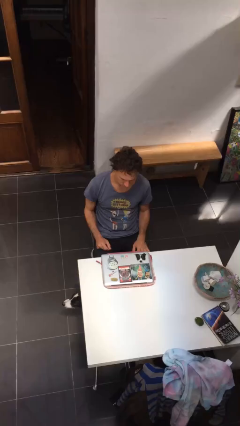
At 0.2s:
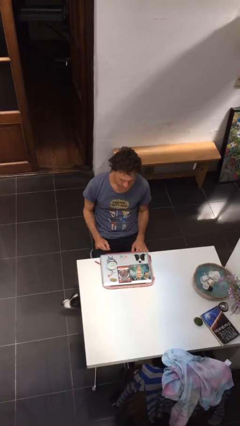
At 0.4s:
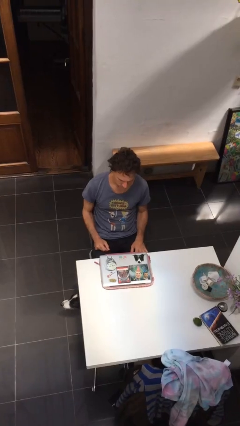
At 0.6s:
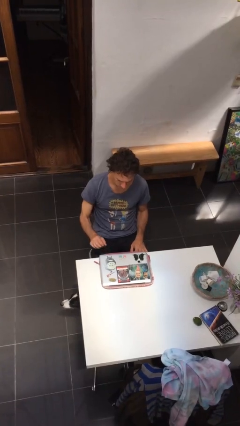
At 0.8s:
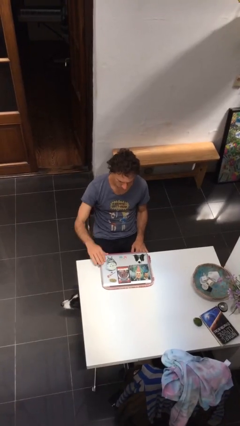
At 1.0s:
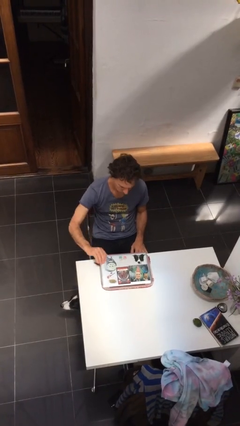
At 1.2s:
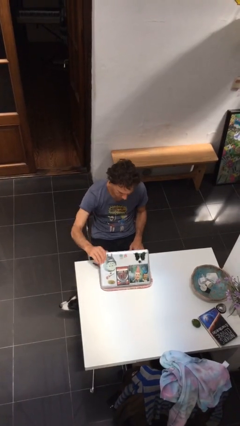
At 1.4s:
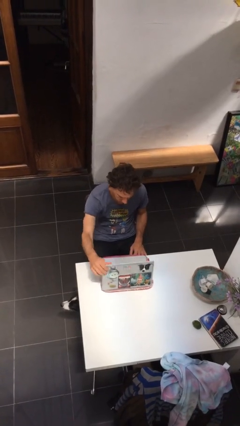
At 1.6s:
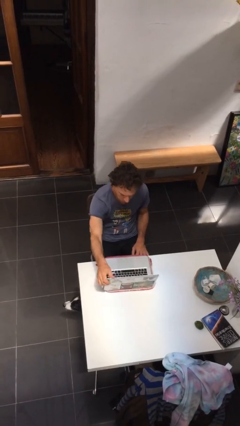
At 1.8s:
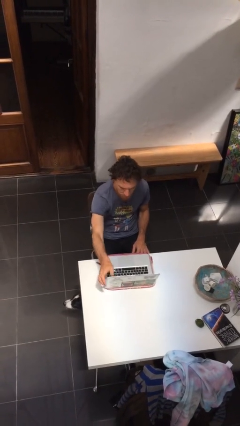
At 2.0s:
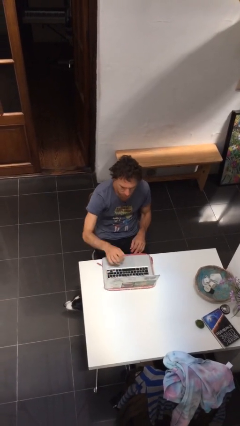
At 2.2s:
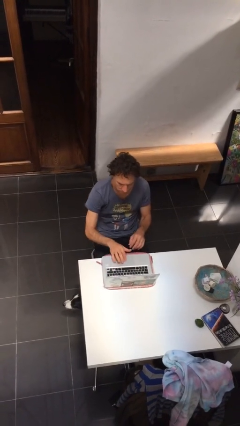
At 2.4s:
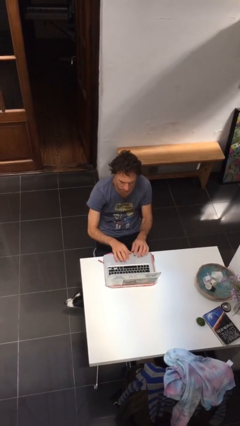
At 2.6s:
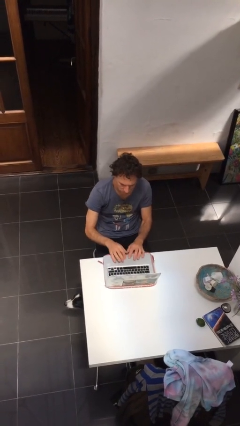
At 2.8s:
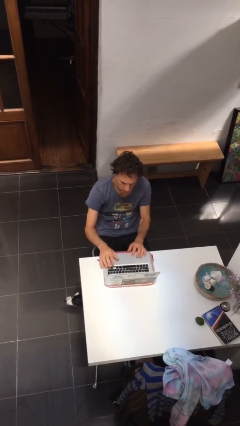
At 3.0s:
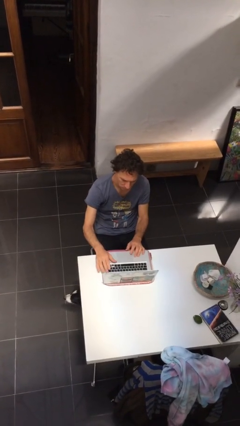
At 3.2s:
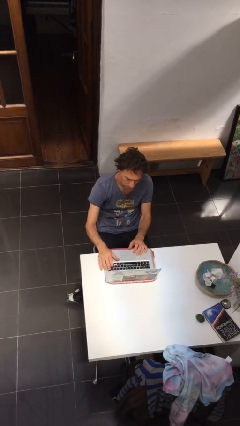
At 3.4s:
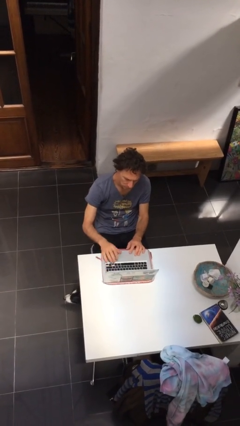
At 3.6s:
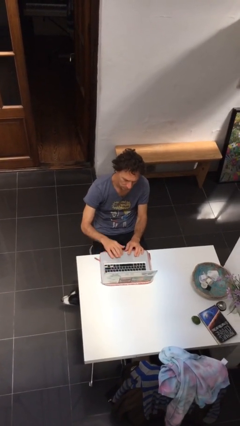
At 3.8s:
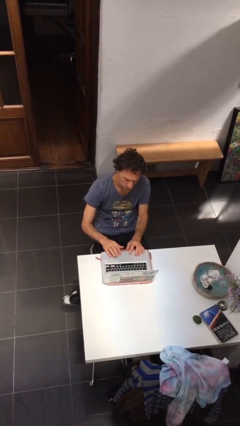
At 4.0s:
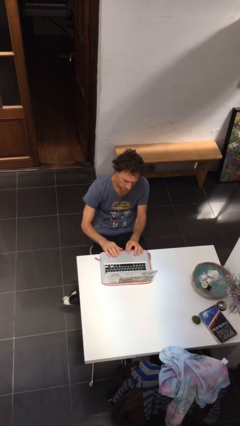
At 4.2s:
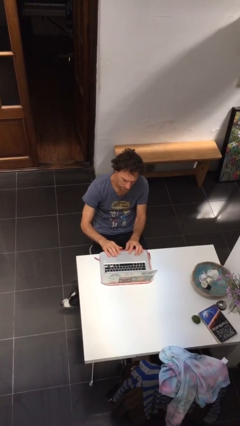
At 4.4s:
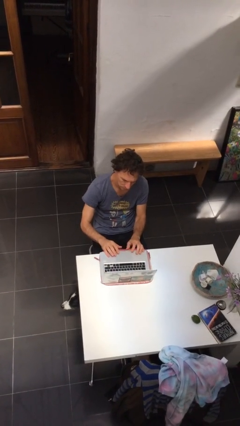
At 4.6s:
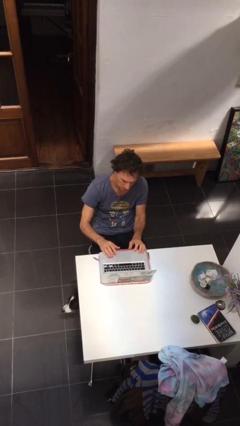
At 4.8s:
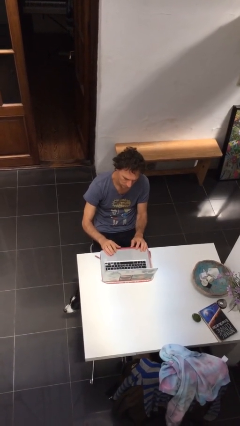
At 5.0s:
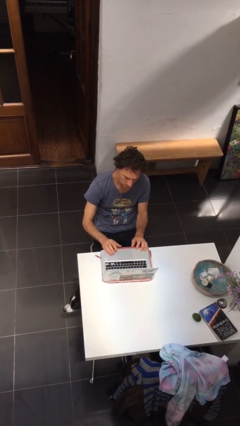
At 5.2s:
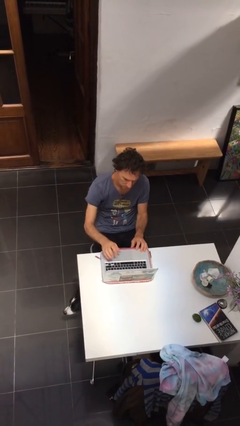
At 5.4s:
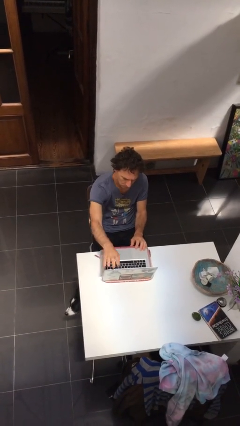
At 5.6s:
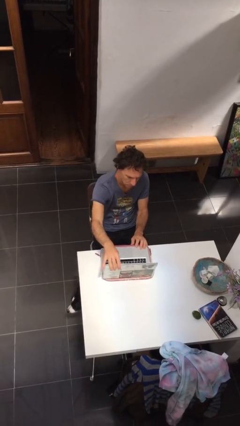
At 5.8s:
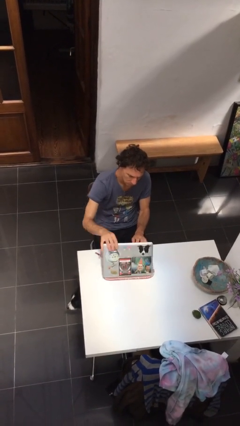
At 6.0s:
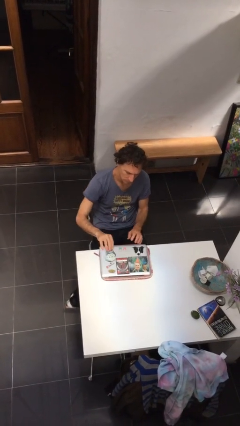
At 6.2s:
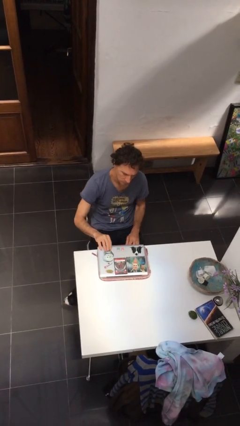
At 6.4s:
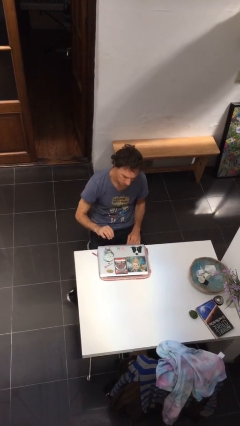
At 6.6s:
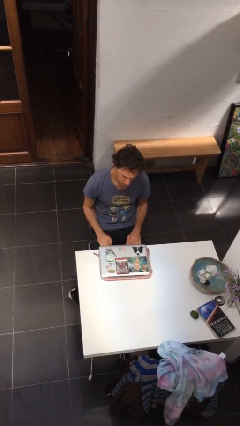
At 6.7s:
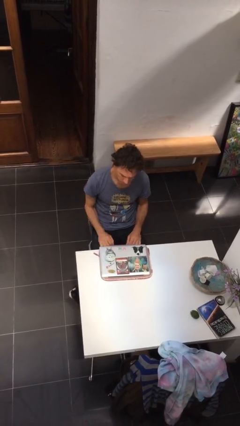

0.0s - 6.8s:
person interacts with laptop

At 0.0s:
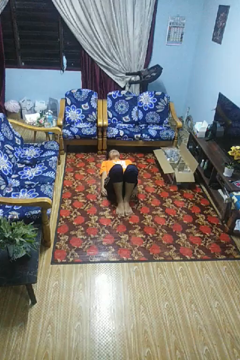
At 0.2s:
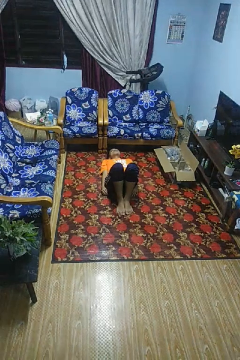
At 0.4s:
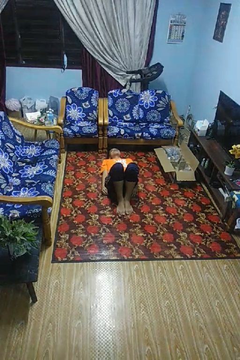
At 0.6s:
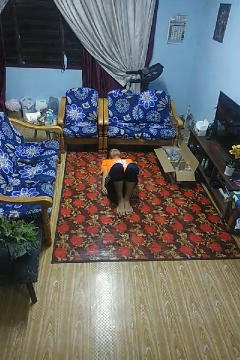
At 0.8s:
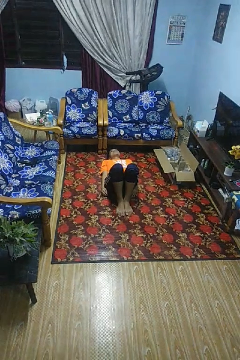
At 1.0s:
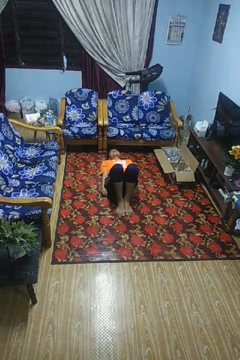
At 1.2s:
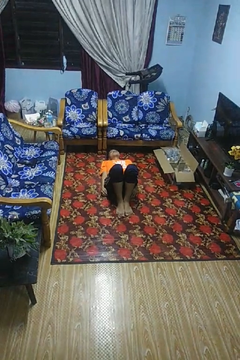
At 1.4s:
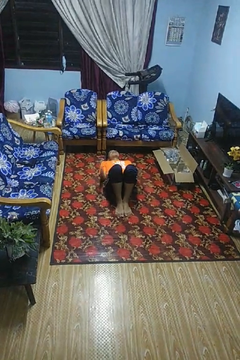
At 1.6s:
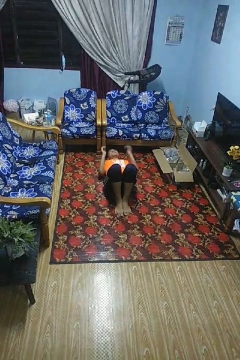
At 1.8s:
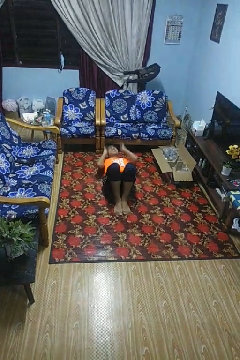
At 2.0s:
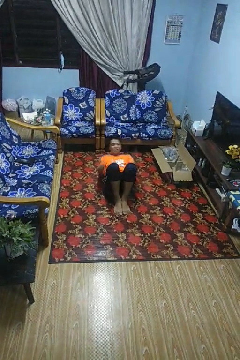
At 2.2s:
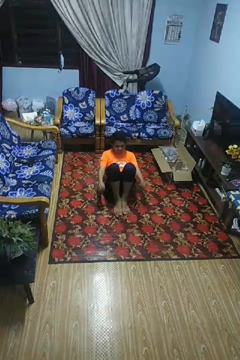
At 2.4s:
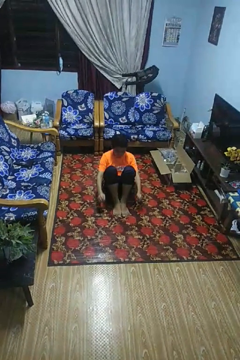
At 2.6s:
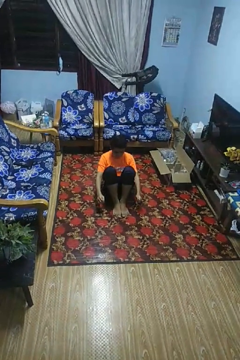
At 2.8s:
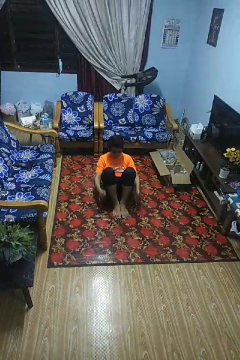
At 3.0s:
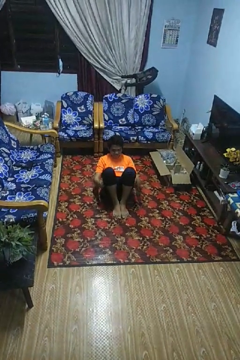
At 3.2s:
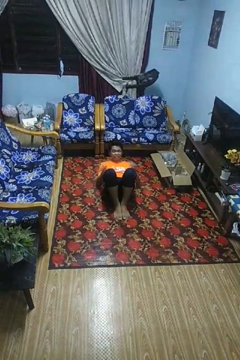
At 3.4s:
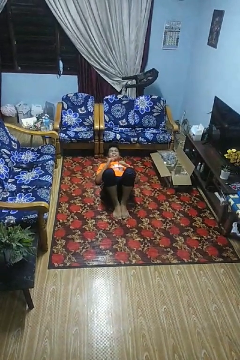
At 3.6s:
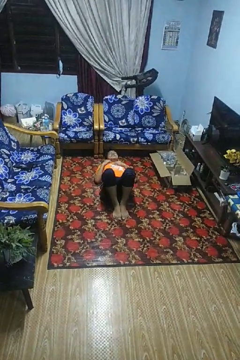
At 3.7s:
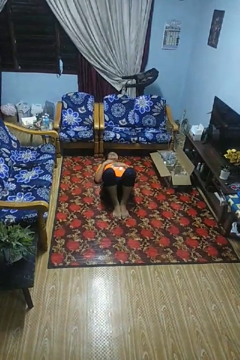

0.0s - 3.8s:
person exercises with situp

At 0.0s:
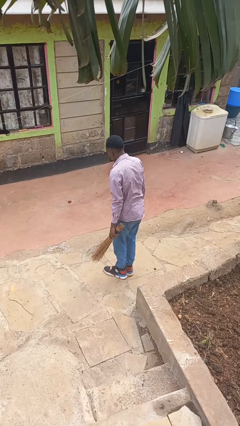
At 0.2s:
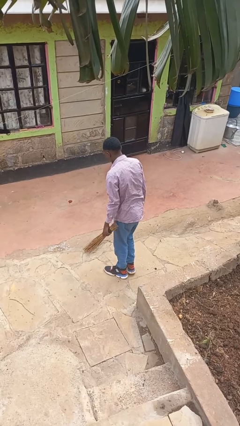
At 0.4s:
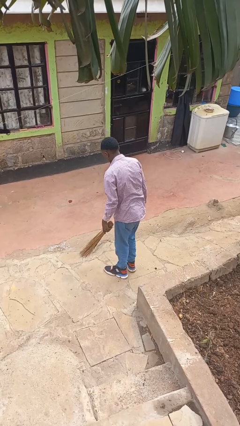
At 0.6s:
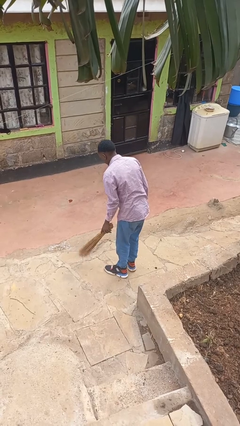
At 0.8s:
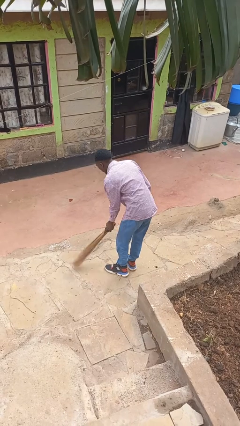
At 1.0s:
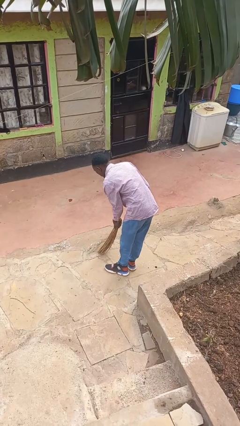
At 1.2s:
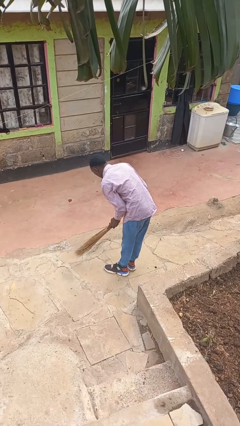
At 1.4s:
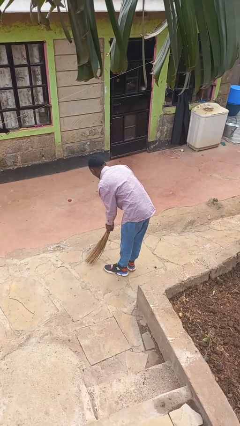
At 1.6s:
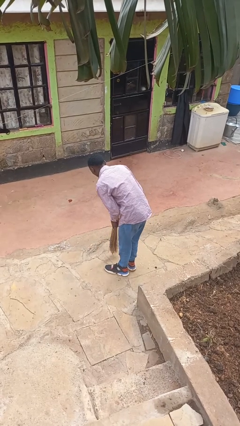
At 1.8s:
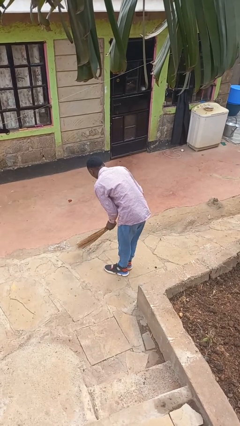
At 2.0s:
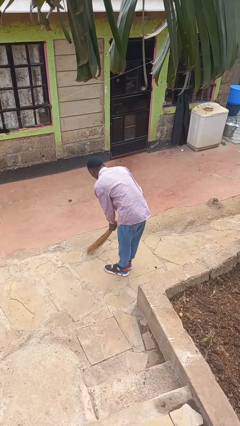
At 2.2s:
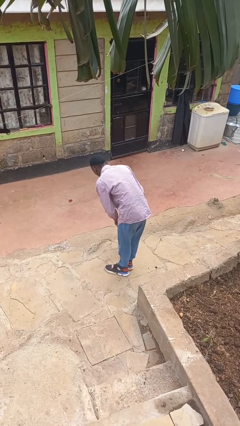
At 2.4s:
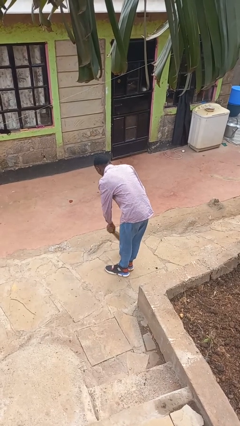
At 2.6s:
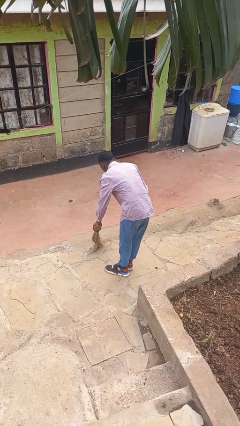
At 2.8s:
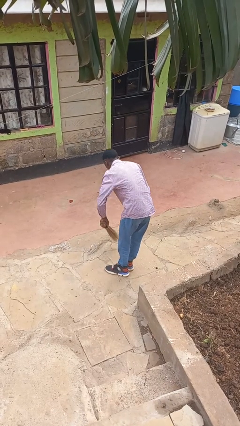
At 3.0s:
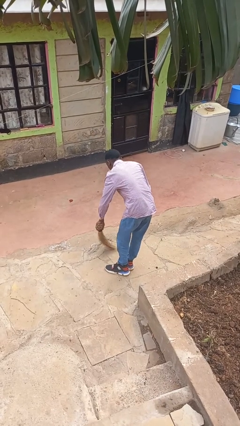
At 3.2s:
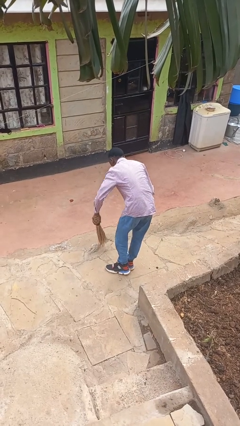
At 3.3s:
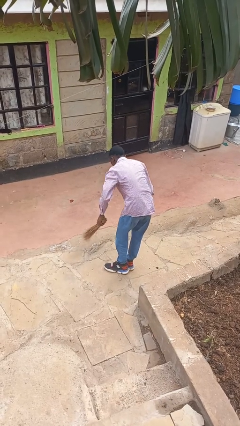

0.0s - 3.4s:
person sweeps floor

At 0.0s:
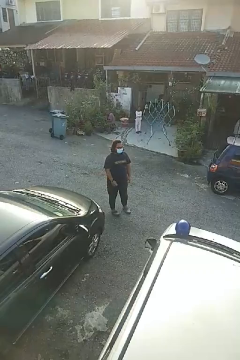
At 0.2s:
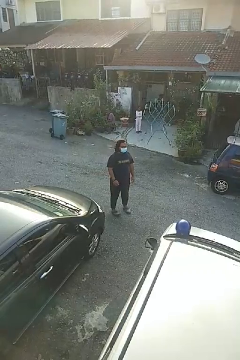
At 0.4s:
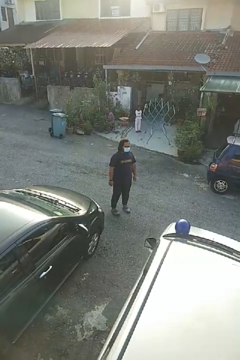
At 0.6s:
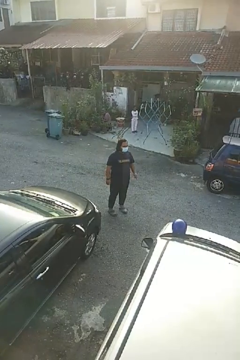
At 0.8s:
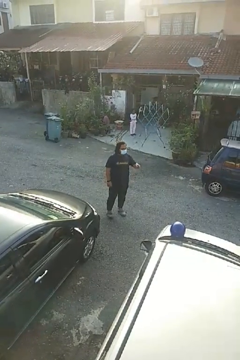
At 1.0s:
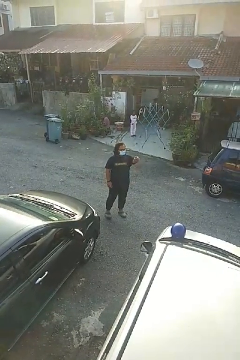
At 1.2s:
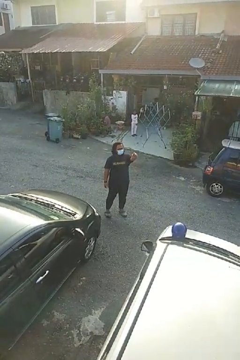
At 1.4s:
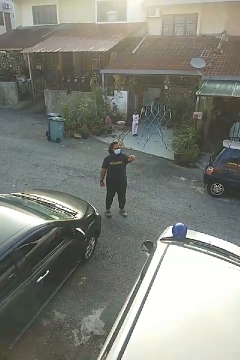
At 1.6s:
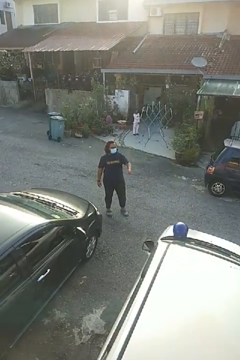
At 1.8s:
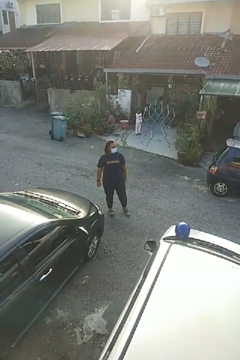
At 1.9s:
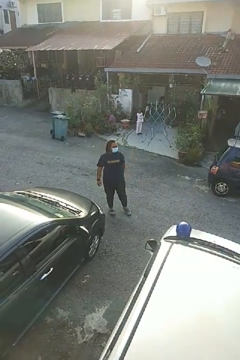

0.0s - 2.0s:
person points at person

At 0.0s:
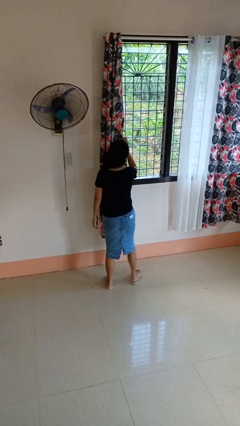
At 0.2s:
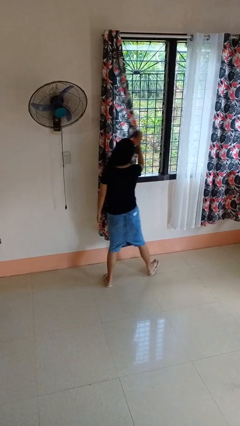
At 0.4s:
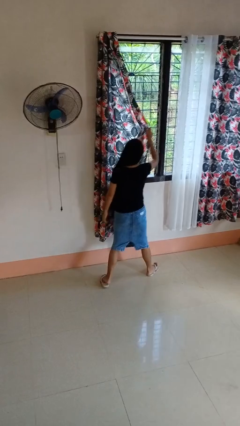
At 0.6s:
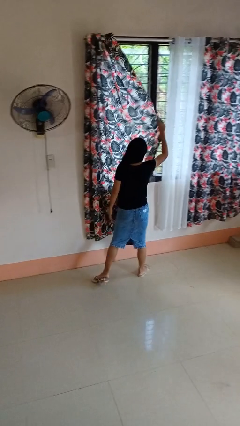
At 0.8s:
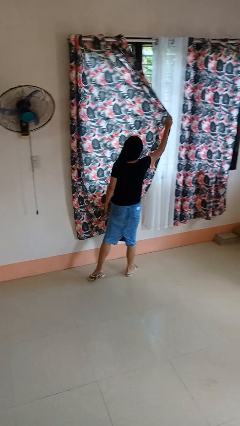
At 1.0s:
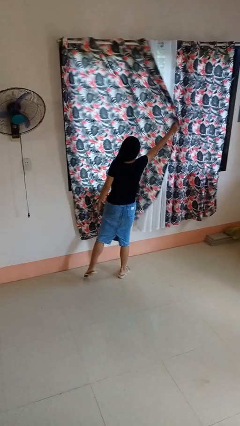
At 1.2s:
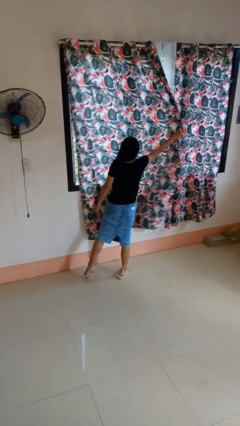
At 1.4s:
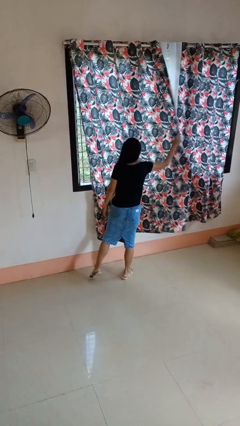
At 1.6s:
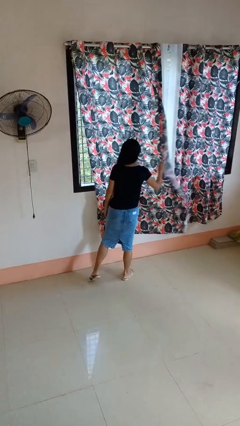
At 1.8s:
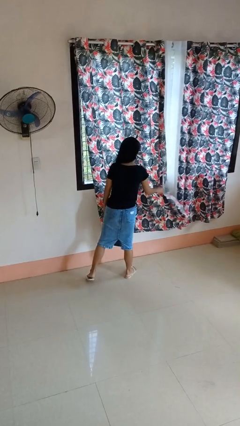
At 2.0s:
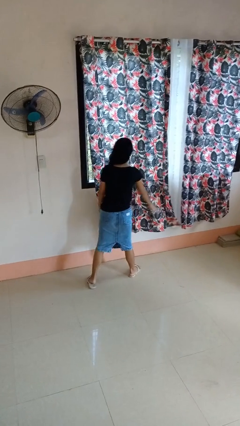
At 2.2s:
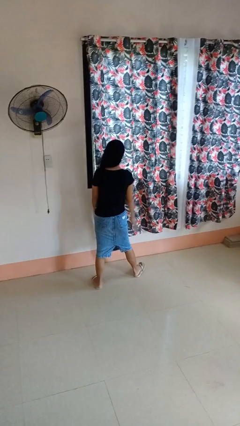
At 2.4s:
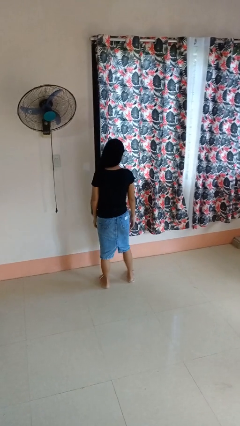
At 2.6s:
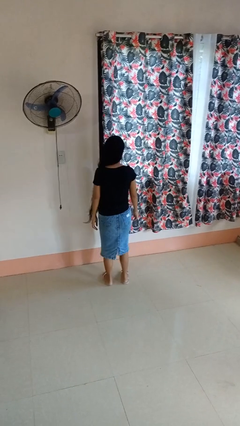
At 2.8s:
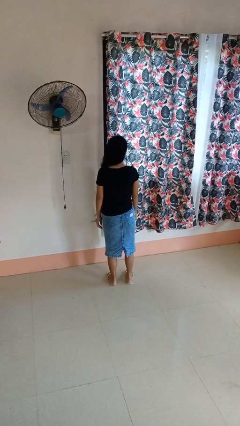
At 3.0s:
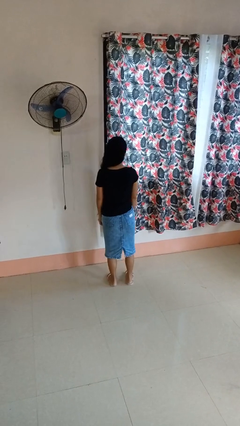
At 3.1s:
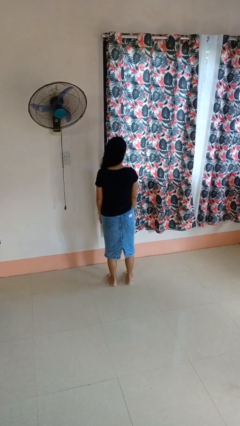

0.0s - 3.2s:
person closes curtains
